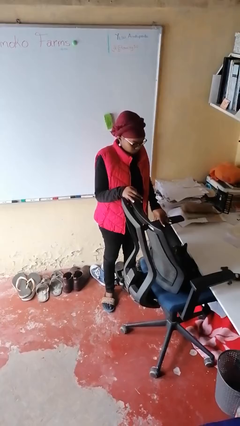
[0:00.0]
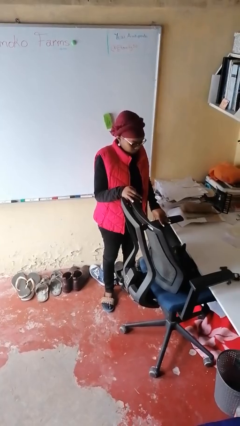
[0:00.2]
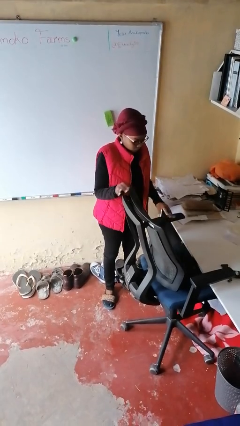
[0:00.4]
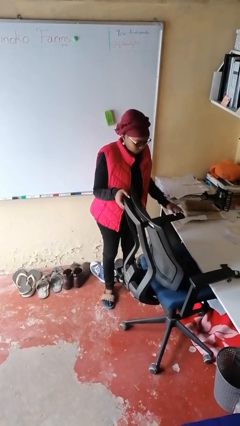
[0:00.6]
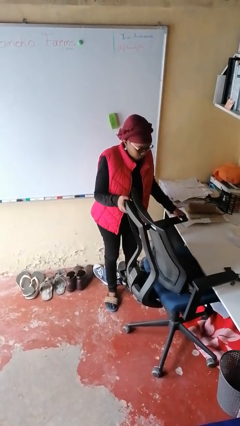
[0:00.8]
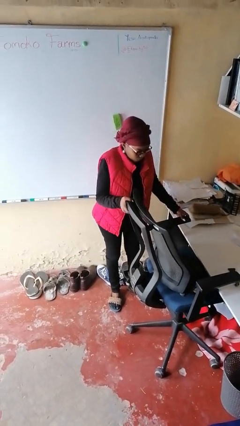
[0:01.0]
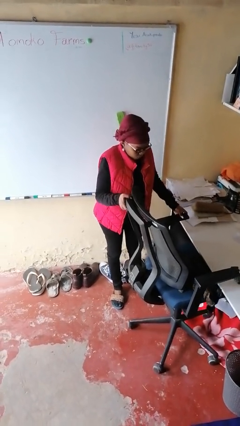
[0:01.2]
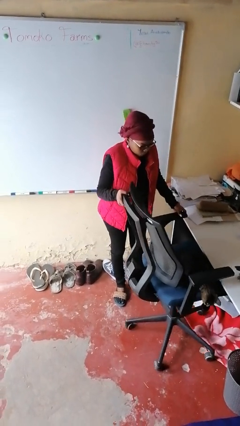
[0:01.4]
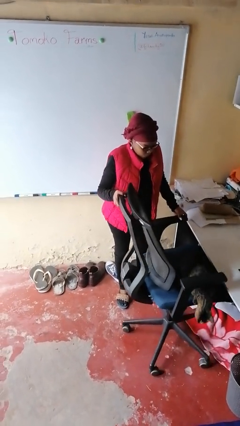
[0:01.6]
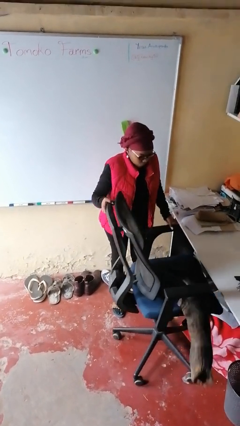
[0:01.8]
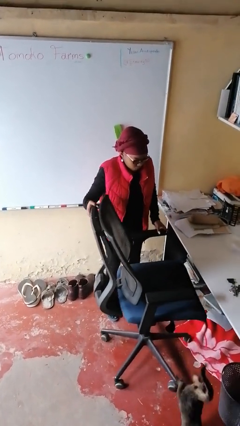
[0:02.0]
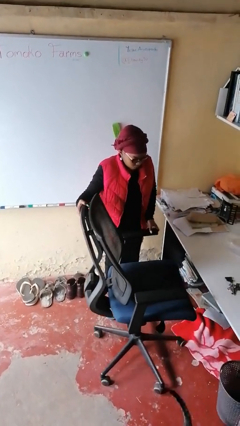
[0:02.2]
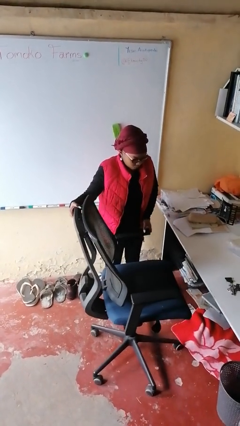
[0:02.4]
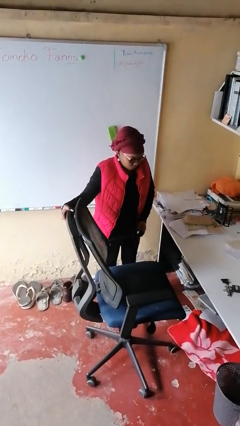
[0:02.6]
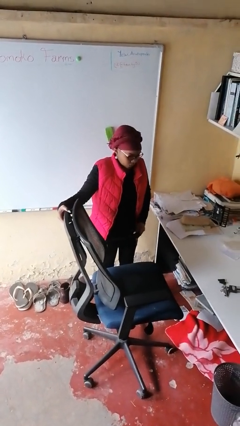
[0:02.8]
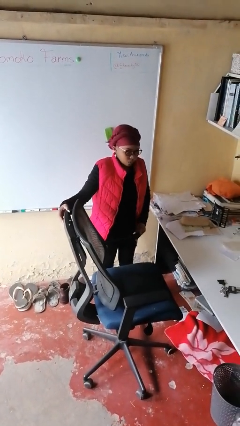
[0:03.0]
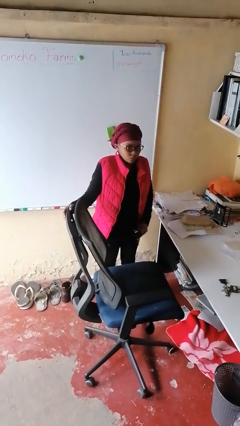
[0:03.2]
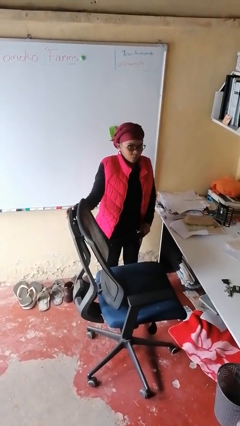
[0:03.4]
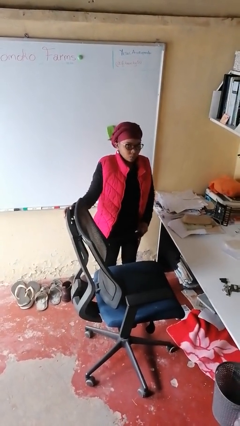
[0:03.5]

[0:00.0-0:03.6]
person pulls out chair

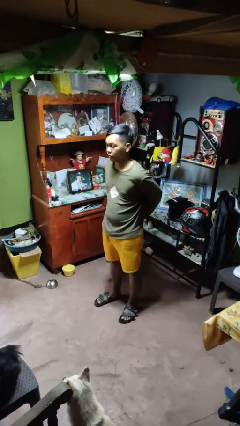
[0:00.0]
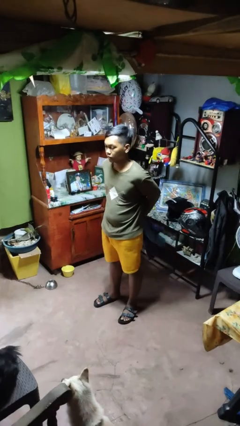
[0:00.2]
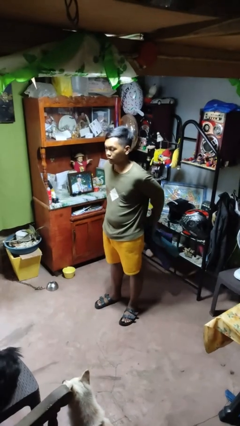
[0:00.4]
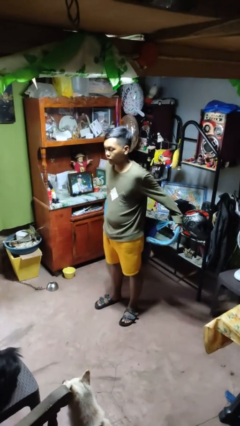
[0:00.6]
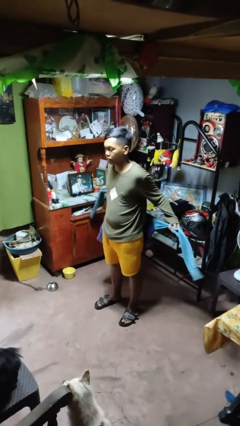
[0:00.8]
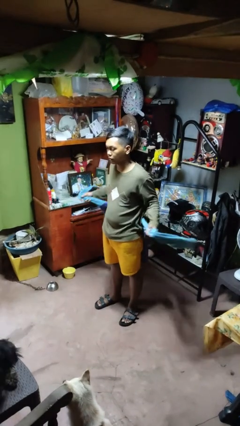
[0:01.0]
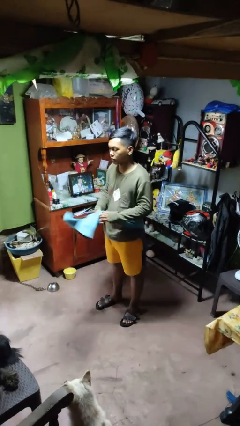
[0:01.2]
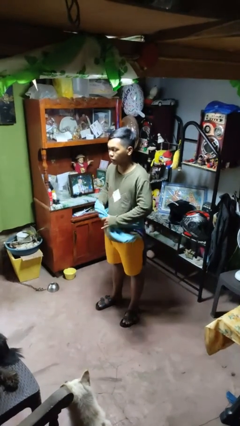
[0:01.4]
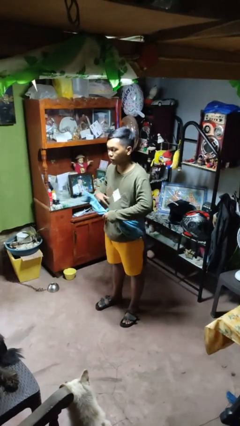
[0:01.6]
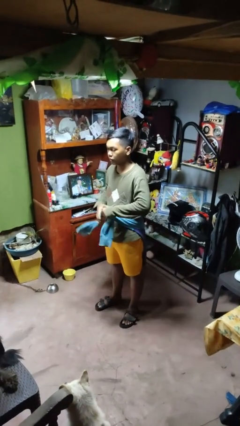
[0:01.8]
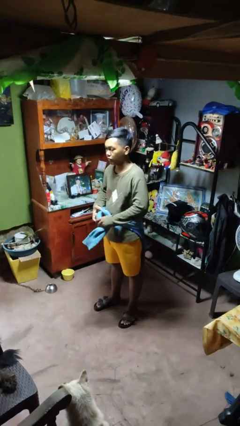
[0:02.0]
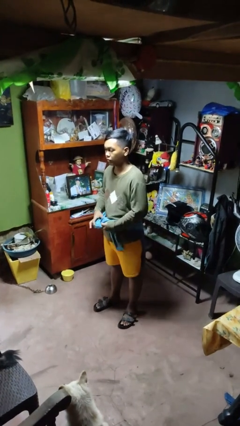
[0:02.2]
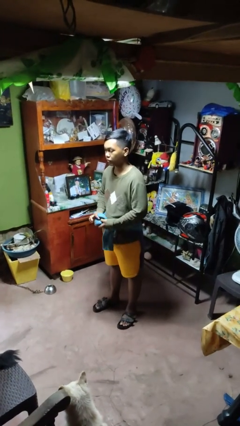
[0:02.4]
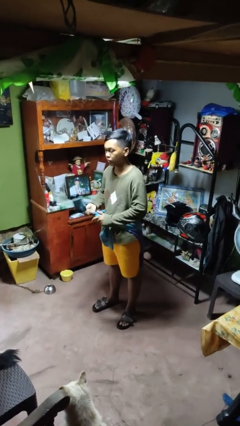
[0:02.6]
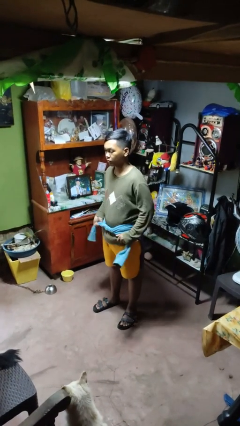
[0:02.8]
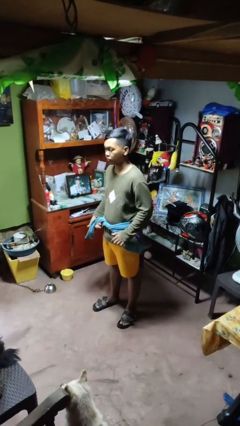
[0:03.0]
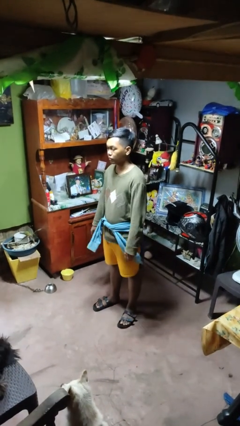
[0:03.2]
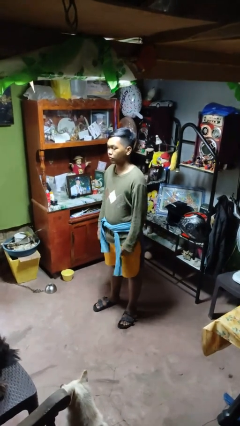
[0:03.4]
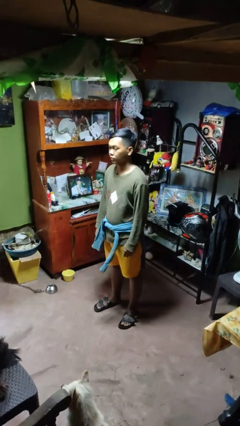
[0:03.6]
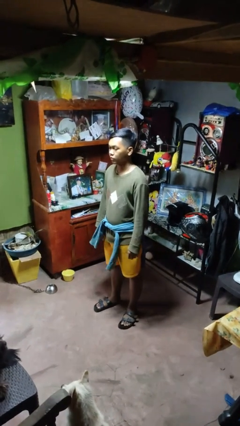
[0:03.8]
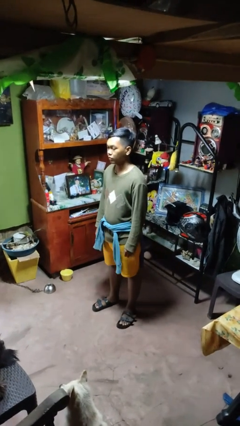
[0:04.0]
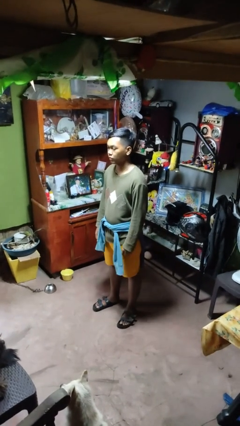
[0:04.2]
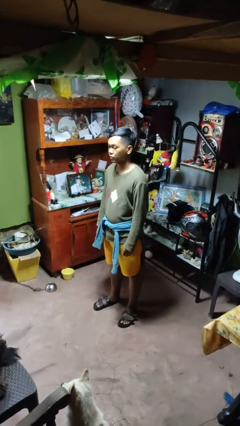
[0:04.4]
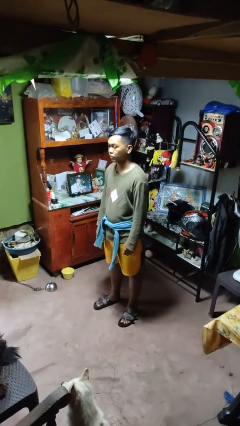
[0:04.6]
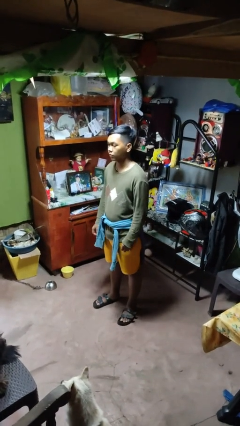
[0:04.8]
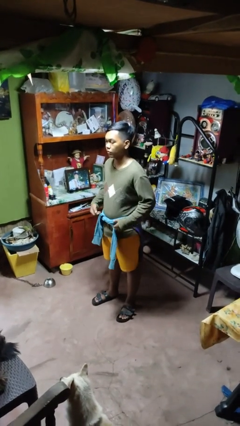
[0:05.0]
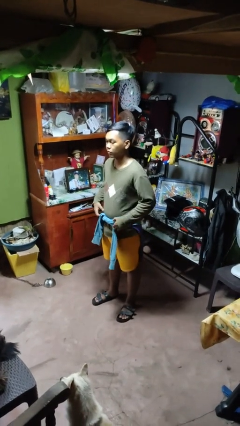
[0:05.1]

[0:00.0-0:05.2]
person ties jacket around waist

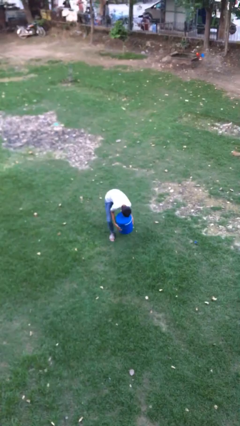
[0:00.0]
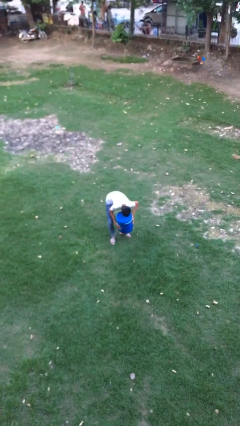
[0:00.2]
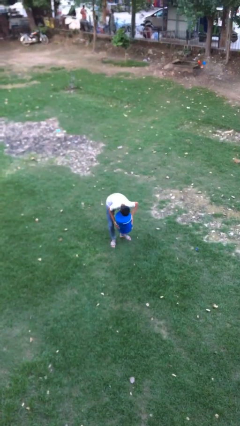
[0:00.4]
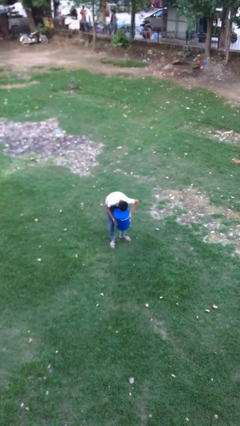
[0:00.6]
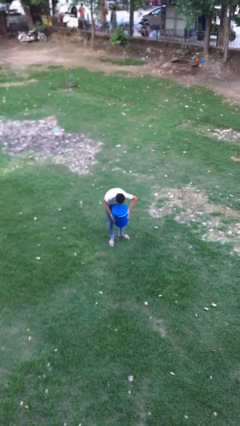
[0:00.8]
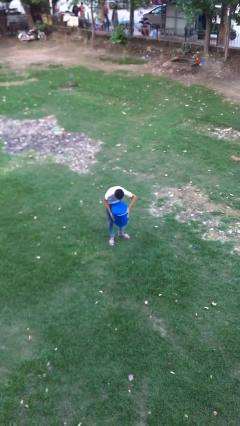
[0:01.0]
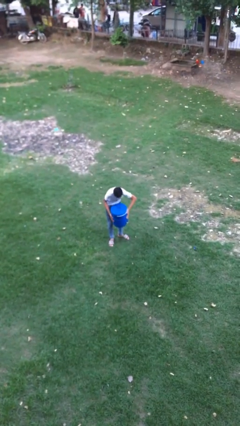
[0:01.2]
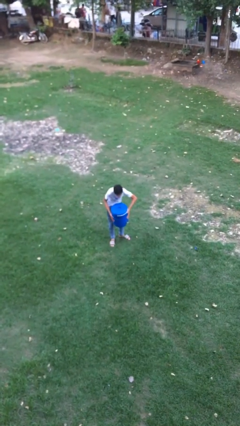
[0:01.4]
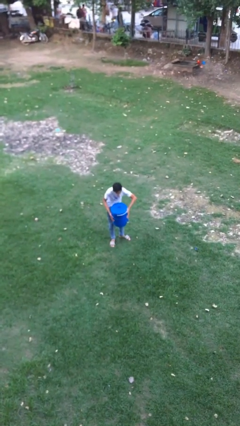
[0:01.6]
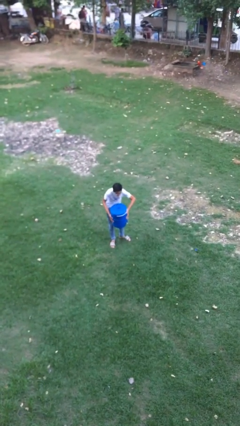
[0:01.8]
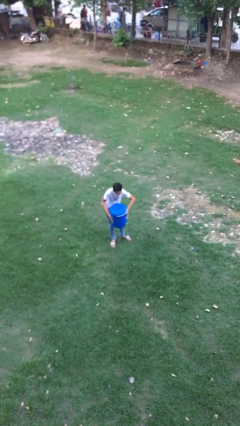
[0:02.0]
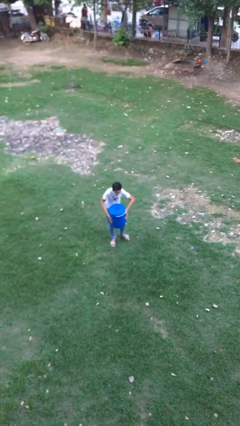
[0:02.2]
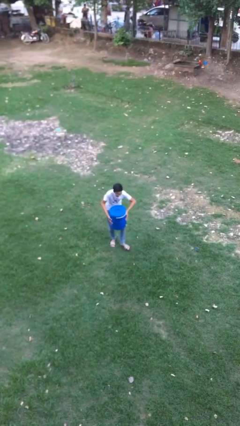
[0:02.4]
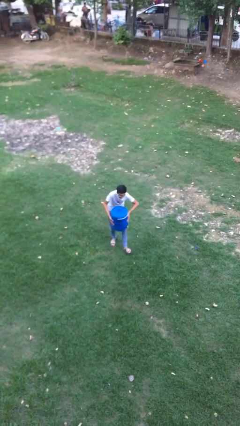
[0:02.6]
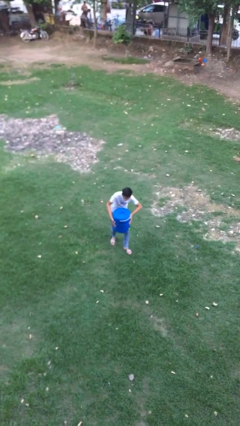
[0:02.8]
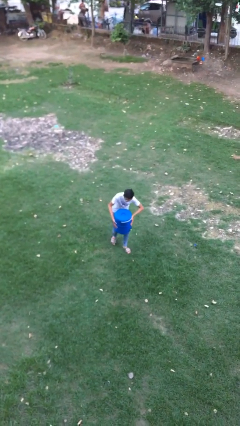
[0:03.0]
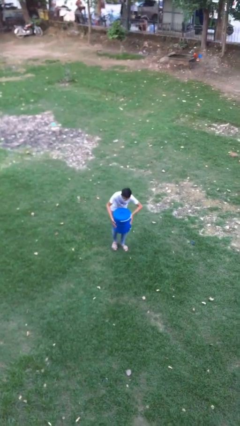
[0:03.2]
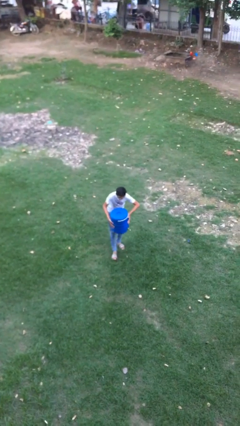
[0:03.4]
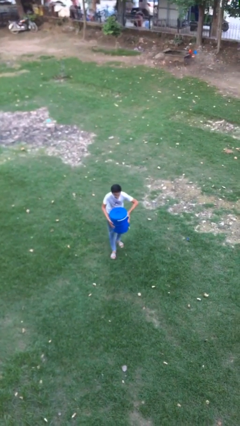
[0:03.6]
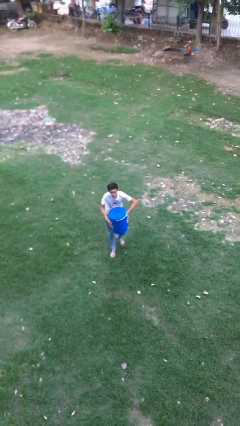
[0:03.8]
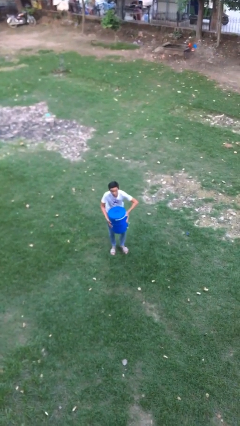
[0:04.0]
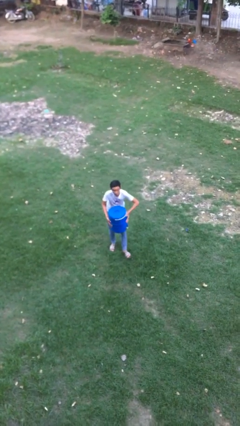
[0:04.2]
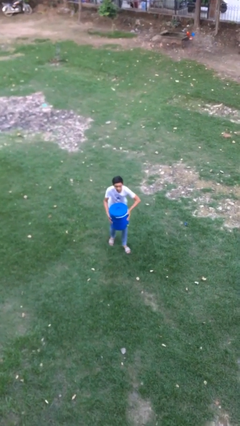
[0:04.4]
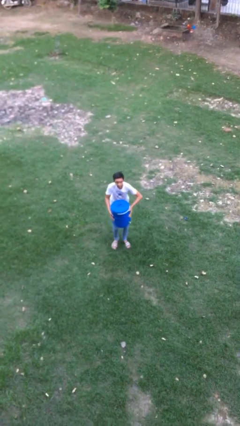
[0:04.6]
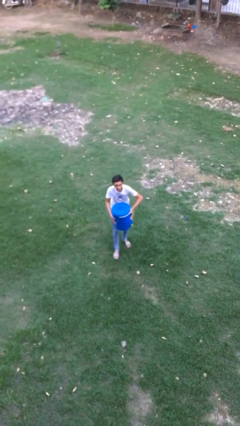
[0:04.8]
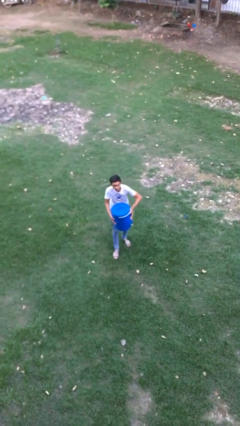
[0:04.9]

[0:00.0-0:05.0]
person carries heavy object

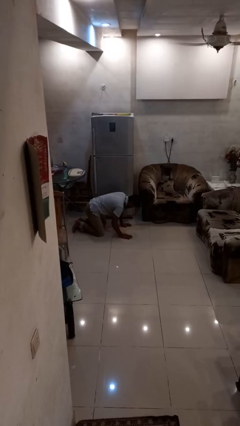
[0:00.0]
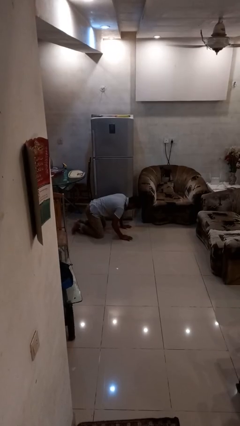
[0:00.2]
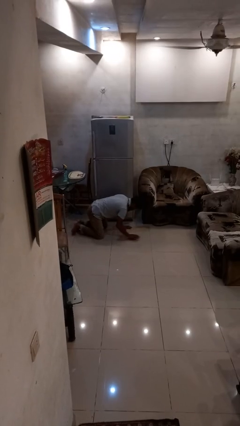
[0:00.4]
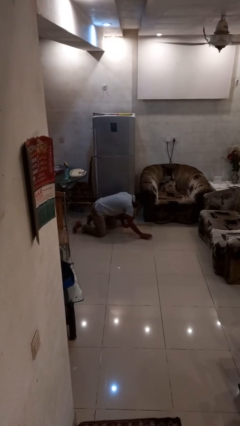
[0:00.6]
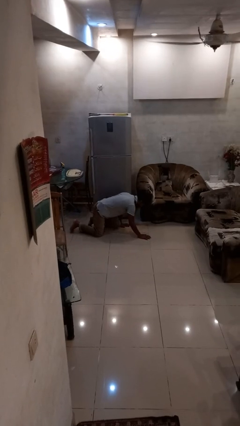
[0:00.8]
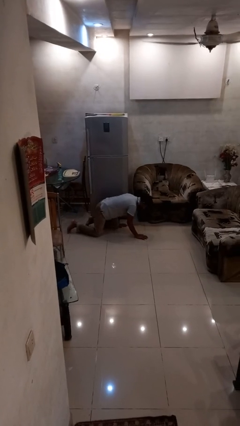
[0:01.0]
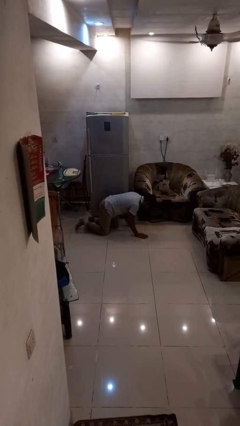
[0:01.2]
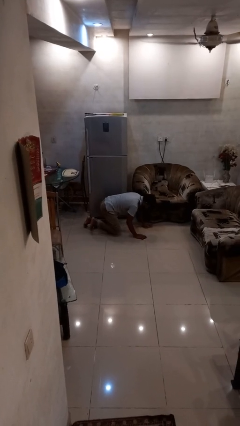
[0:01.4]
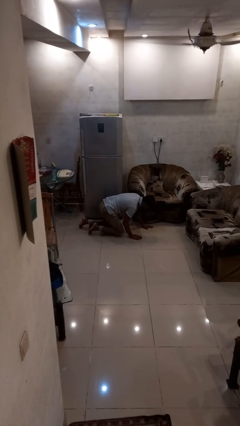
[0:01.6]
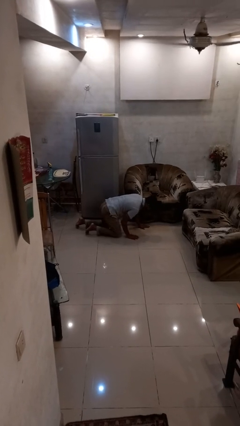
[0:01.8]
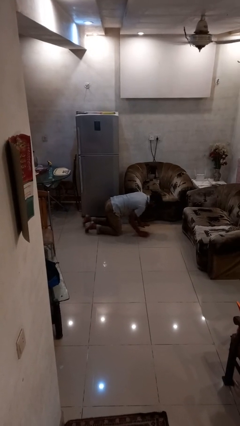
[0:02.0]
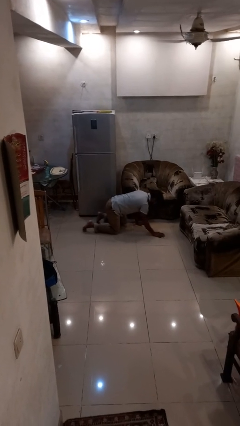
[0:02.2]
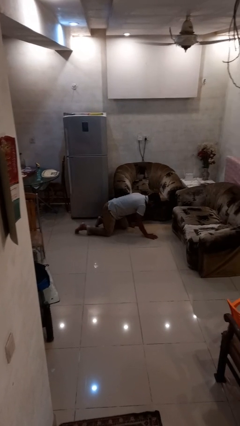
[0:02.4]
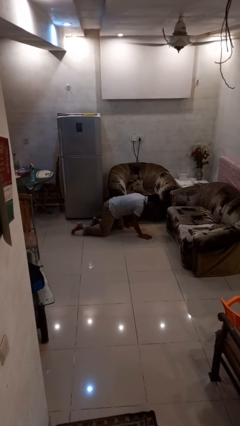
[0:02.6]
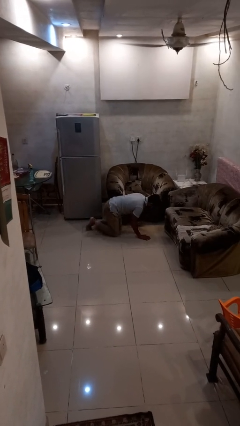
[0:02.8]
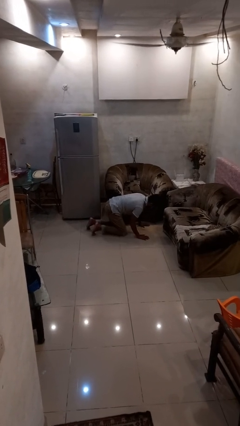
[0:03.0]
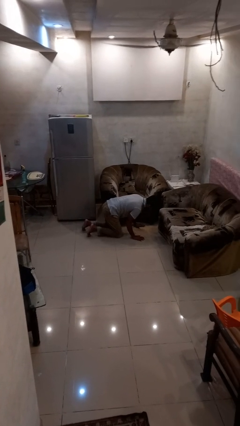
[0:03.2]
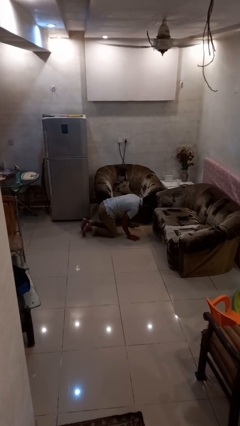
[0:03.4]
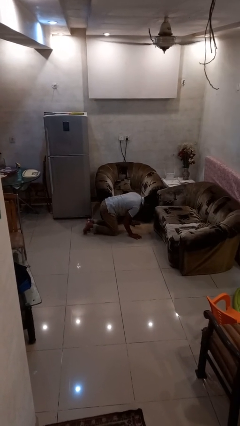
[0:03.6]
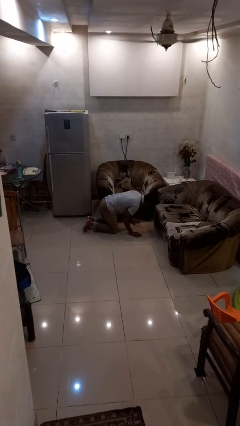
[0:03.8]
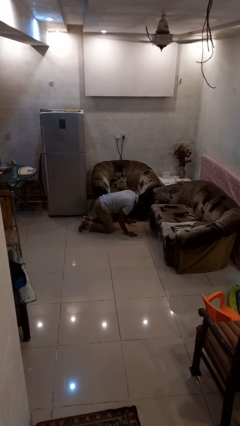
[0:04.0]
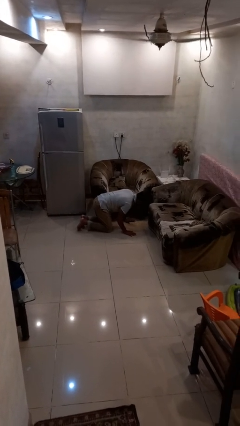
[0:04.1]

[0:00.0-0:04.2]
person crawls
